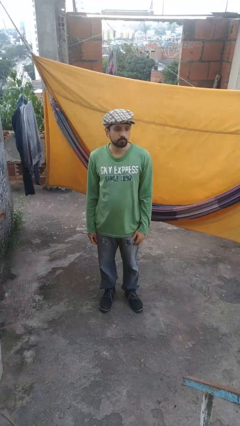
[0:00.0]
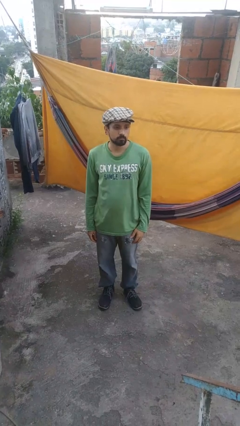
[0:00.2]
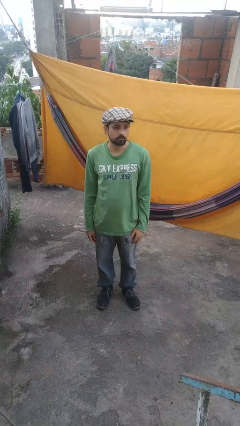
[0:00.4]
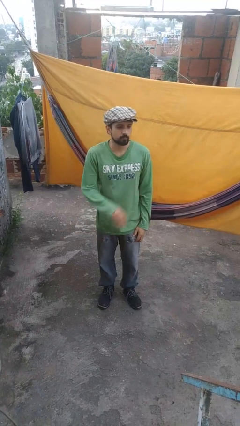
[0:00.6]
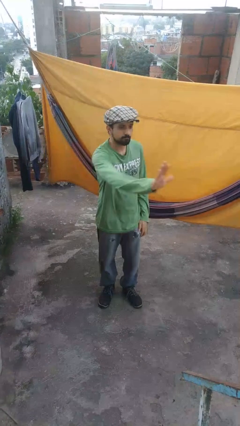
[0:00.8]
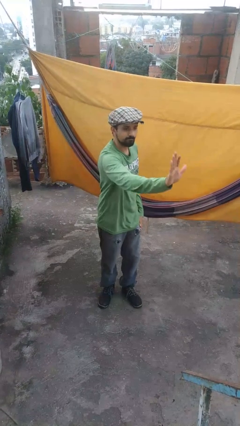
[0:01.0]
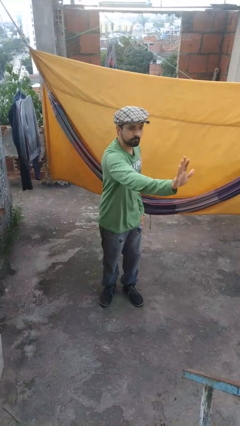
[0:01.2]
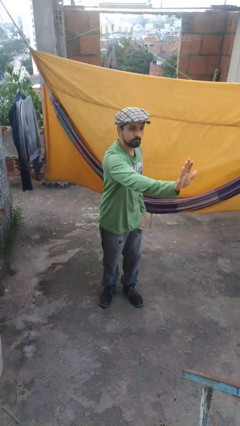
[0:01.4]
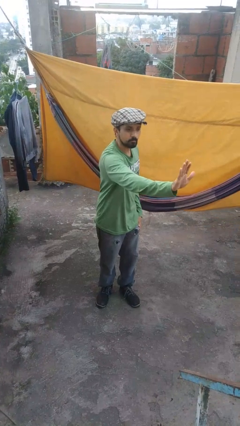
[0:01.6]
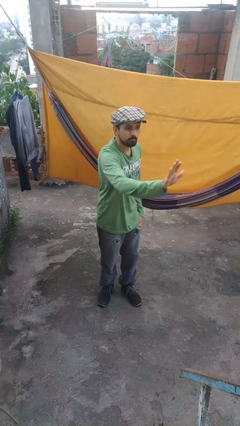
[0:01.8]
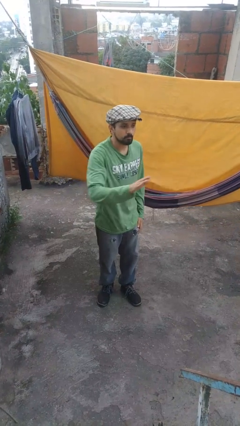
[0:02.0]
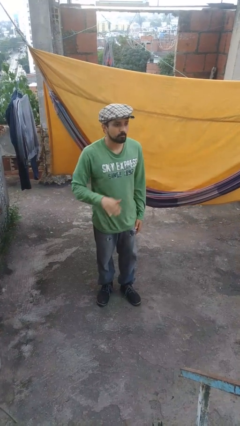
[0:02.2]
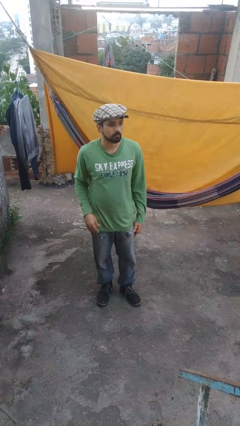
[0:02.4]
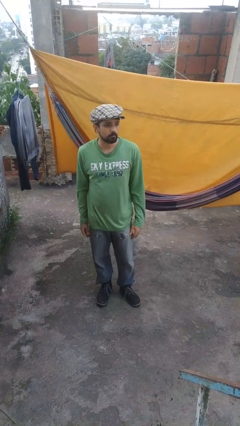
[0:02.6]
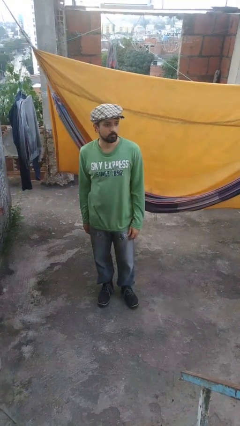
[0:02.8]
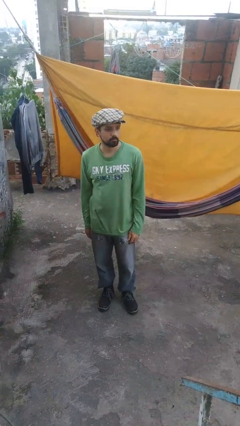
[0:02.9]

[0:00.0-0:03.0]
person gestures stop

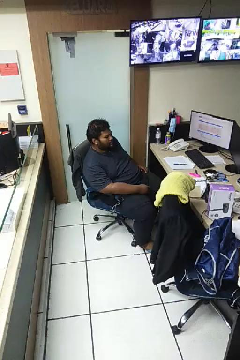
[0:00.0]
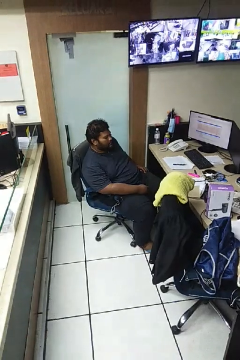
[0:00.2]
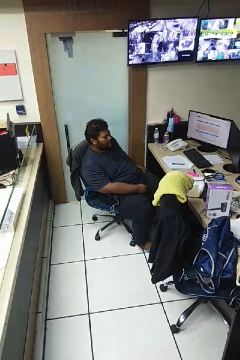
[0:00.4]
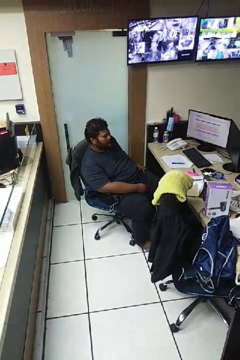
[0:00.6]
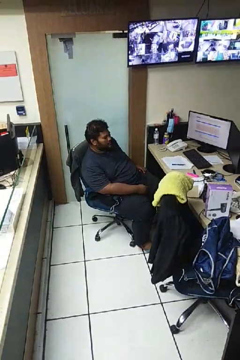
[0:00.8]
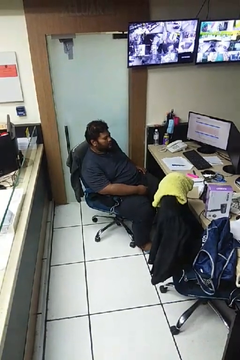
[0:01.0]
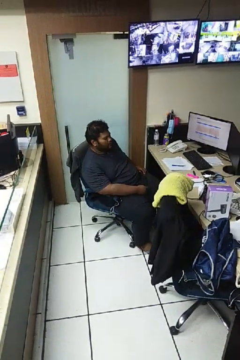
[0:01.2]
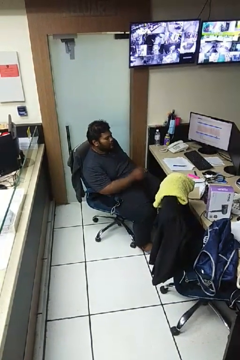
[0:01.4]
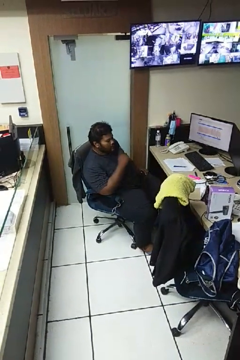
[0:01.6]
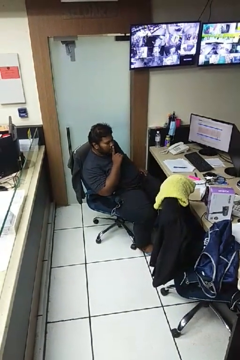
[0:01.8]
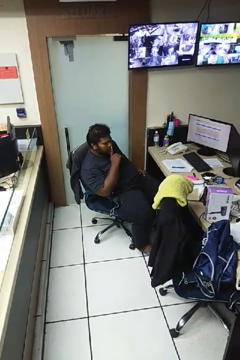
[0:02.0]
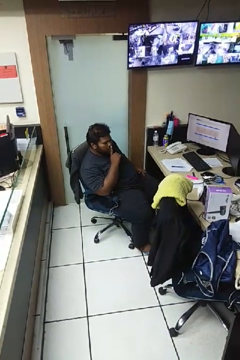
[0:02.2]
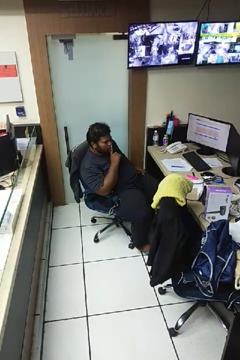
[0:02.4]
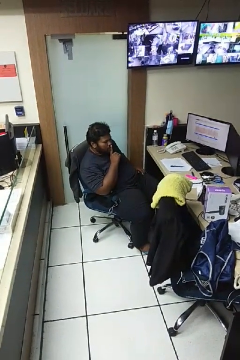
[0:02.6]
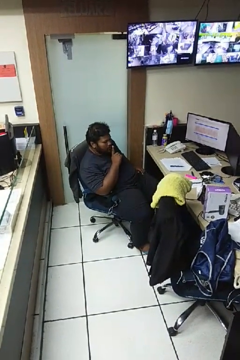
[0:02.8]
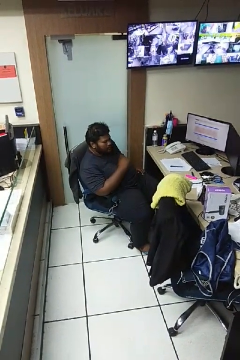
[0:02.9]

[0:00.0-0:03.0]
person gestures be quiet

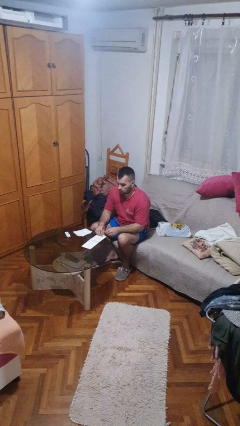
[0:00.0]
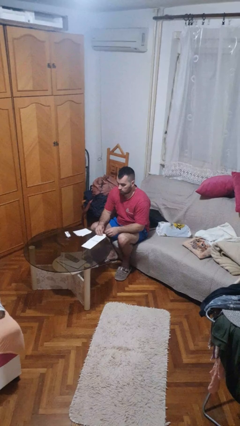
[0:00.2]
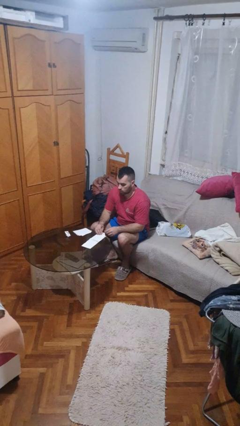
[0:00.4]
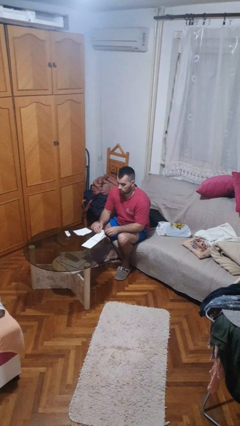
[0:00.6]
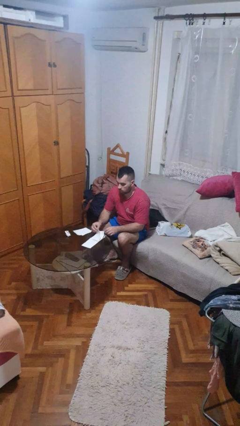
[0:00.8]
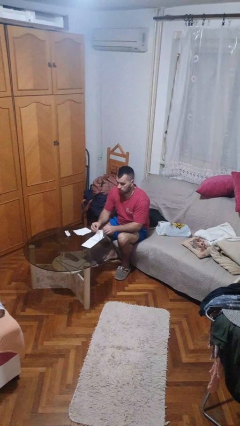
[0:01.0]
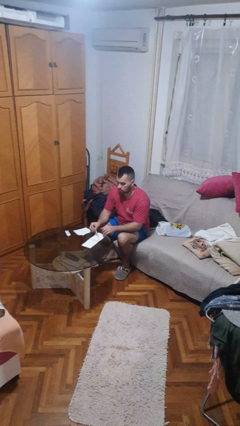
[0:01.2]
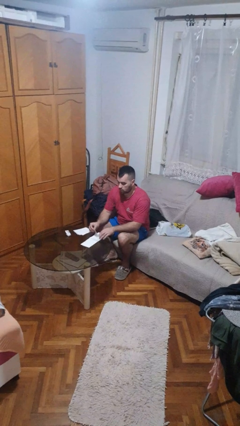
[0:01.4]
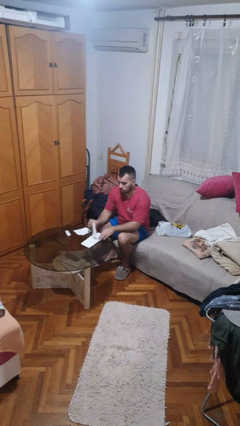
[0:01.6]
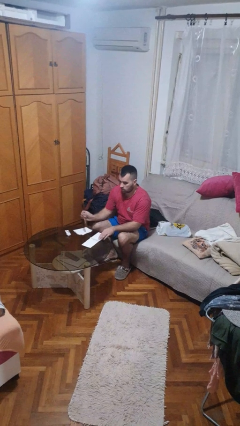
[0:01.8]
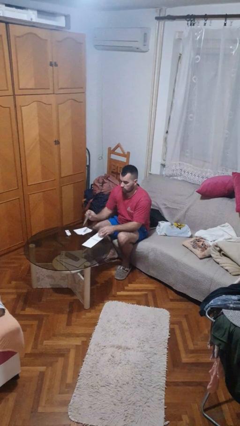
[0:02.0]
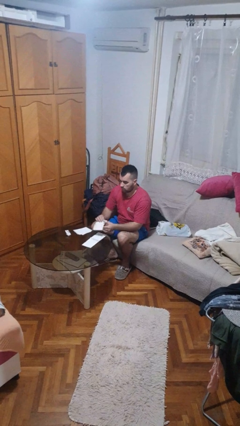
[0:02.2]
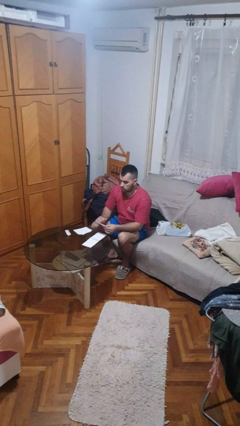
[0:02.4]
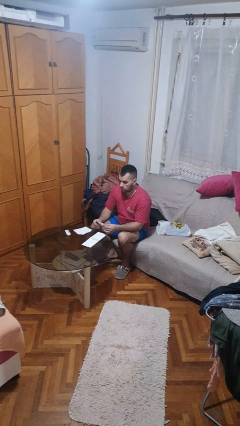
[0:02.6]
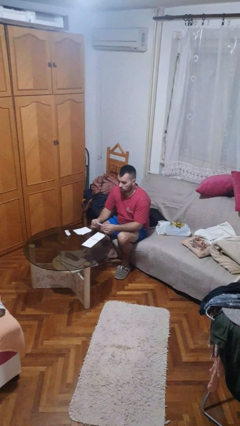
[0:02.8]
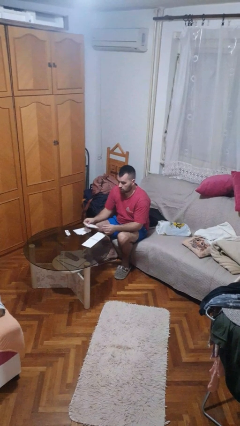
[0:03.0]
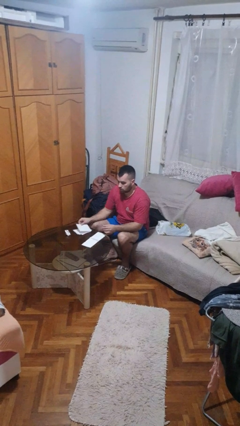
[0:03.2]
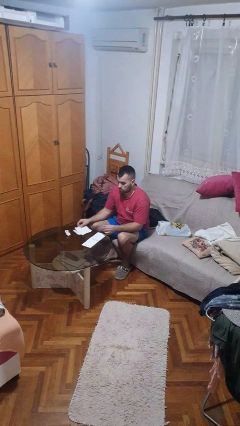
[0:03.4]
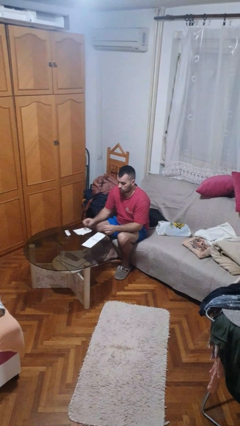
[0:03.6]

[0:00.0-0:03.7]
person tears paper

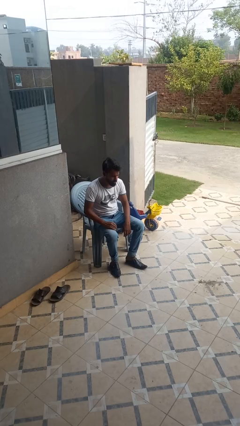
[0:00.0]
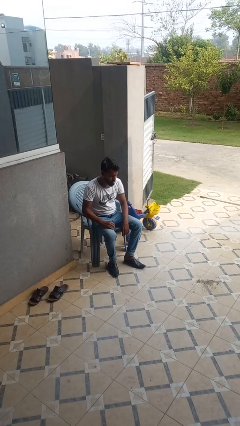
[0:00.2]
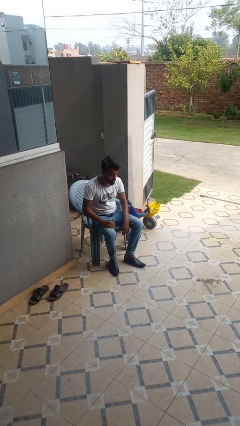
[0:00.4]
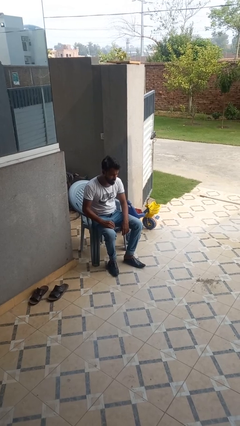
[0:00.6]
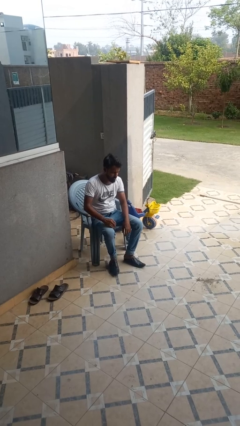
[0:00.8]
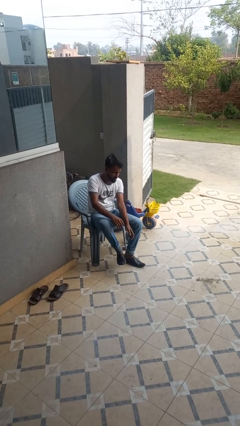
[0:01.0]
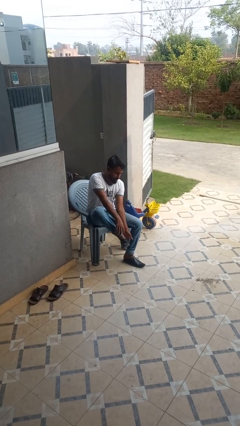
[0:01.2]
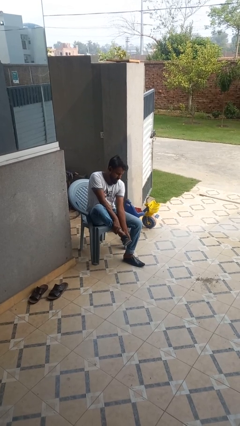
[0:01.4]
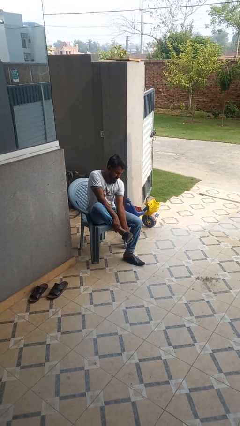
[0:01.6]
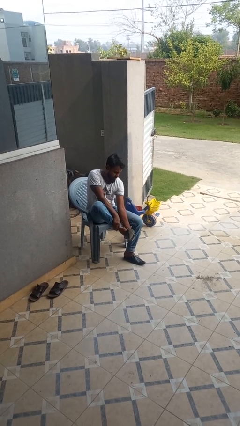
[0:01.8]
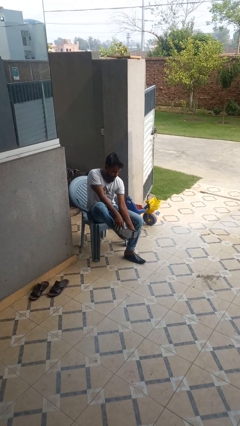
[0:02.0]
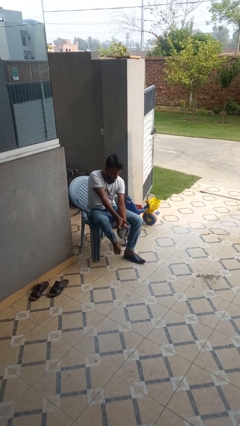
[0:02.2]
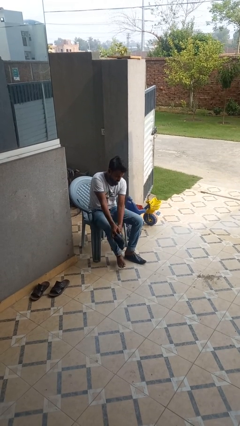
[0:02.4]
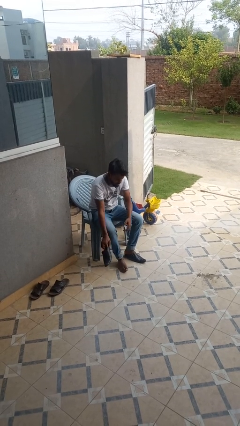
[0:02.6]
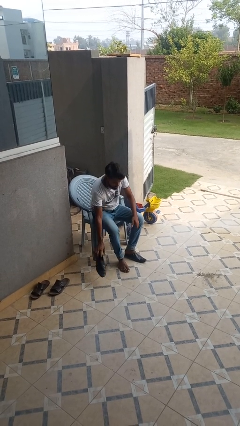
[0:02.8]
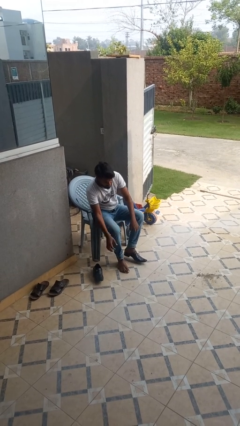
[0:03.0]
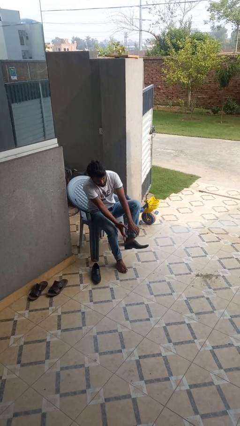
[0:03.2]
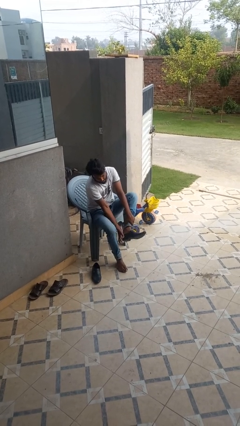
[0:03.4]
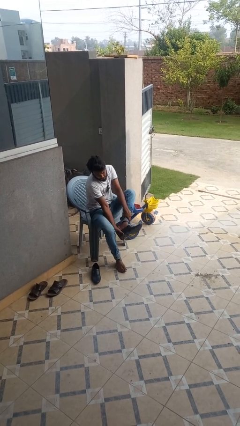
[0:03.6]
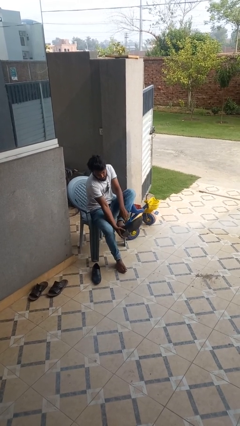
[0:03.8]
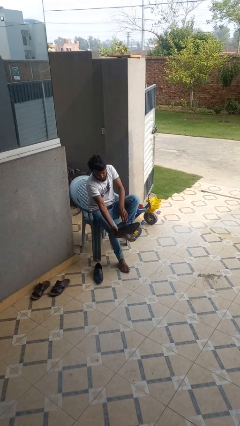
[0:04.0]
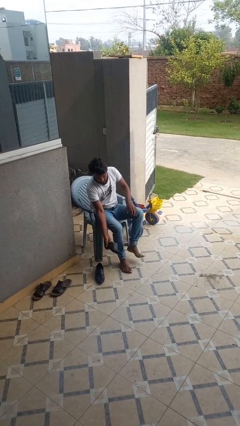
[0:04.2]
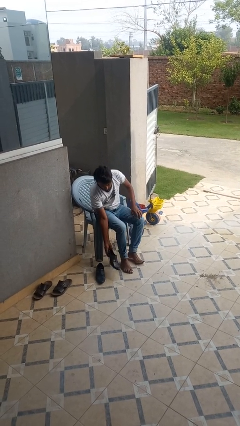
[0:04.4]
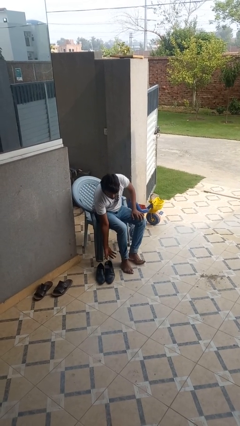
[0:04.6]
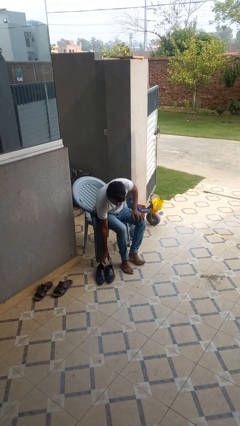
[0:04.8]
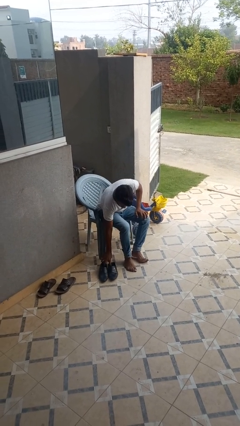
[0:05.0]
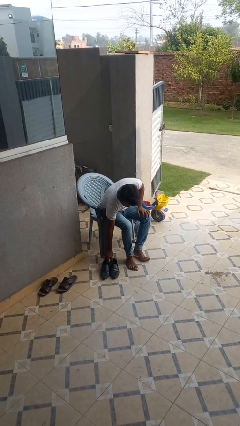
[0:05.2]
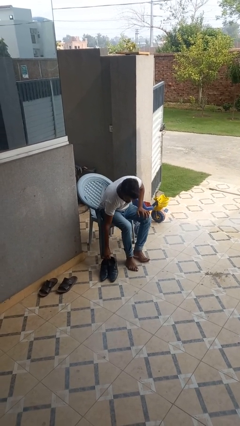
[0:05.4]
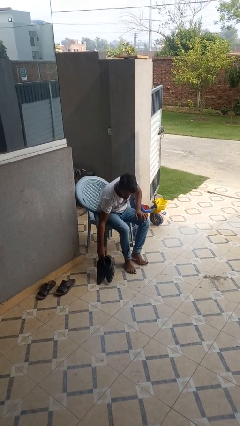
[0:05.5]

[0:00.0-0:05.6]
person takes off shoes

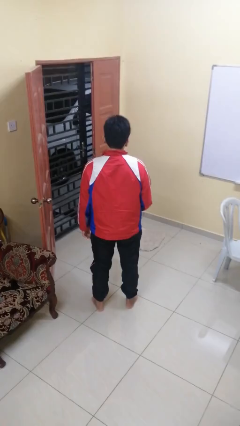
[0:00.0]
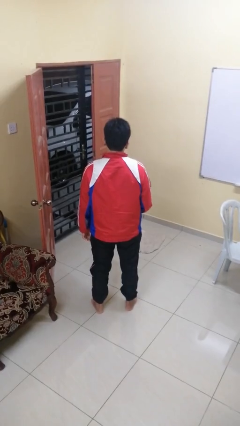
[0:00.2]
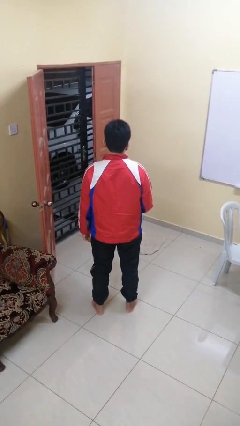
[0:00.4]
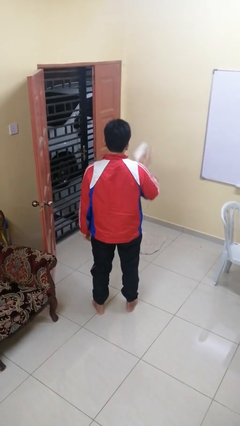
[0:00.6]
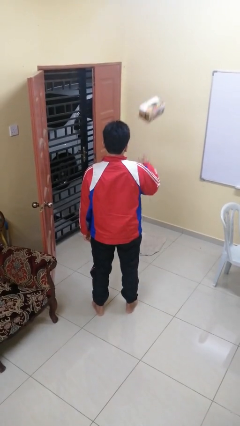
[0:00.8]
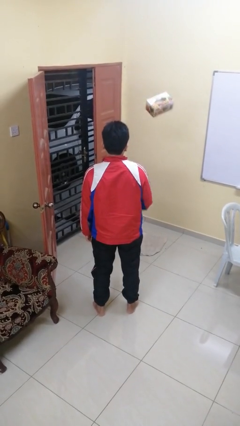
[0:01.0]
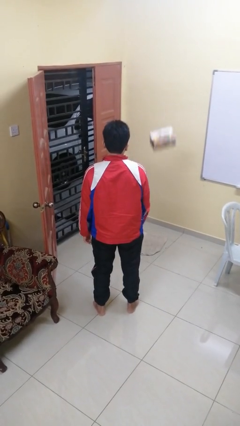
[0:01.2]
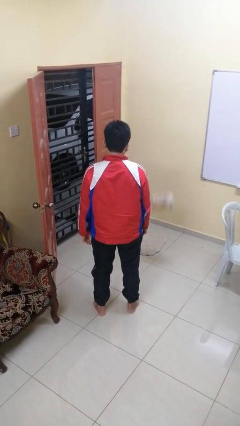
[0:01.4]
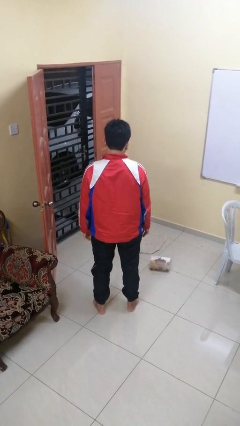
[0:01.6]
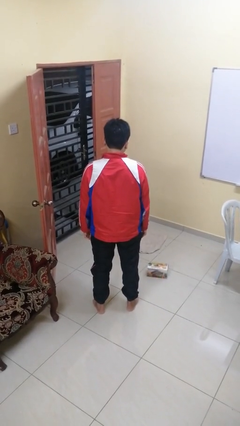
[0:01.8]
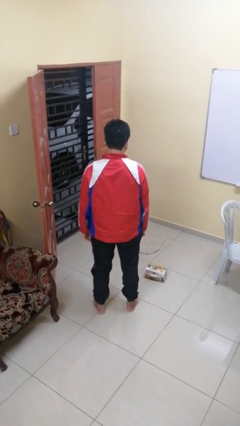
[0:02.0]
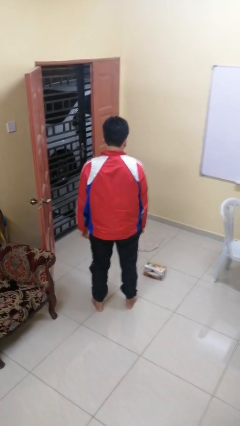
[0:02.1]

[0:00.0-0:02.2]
person throws object into air

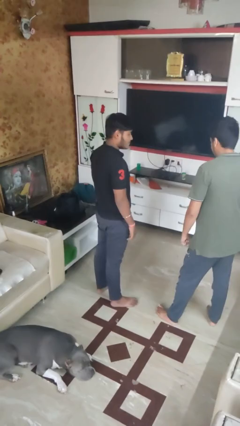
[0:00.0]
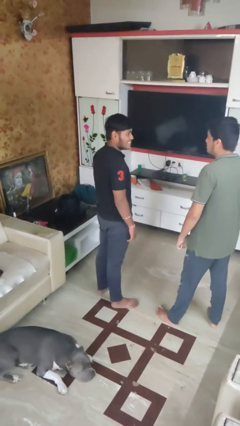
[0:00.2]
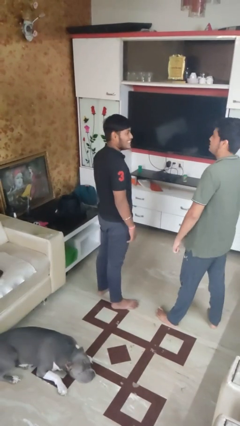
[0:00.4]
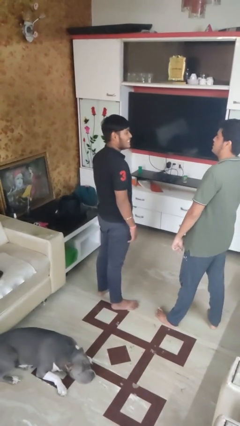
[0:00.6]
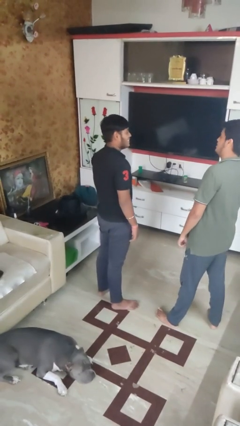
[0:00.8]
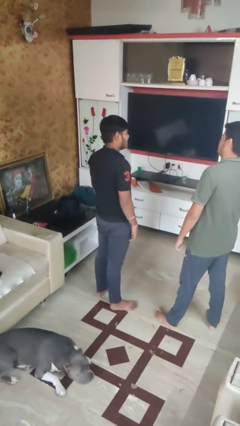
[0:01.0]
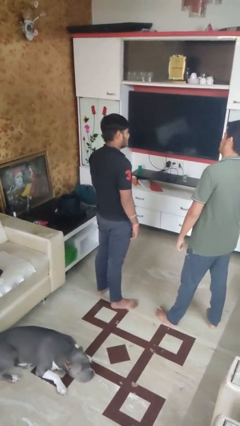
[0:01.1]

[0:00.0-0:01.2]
person laughs with person
